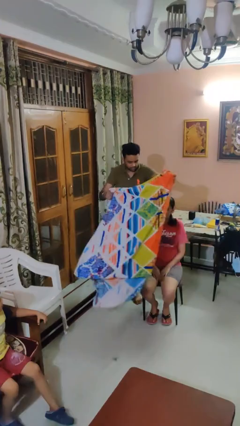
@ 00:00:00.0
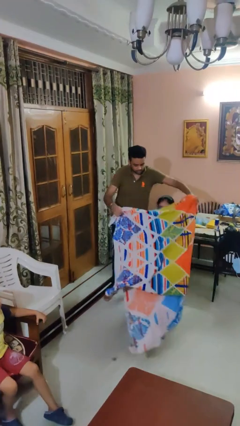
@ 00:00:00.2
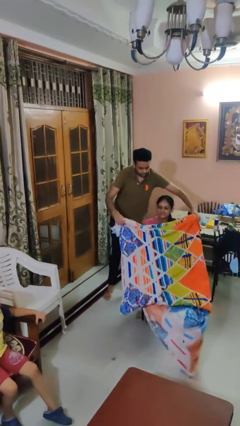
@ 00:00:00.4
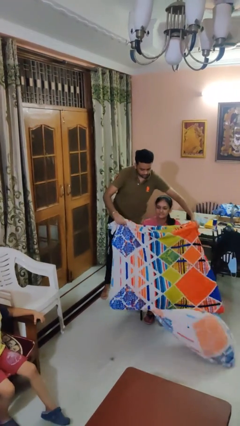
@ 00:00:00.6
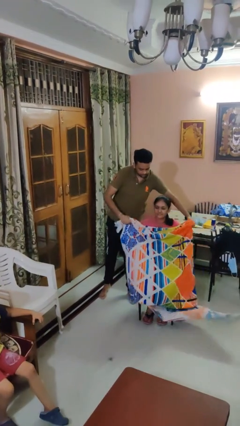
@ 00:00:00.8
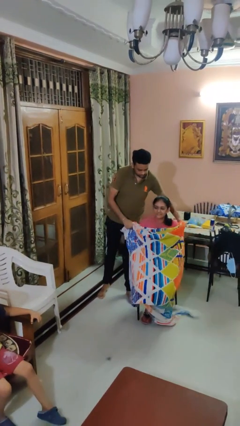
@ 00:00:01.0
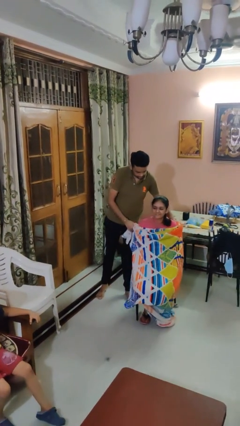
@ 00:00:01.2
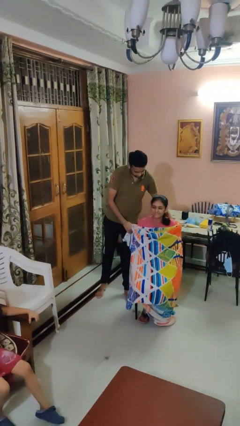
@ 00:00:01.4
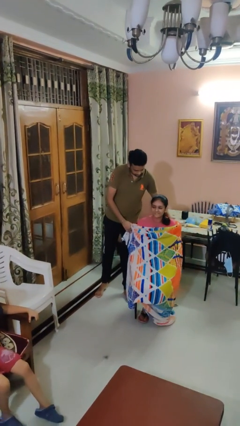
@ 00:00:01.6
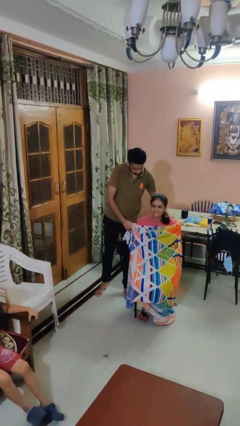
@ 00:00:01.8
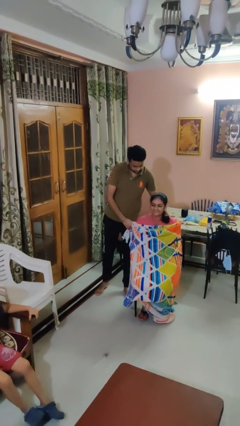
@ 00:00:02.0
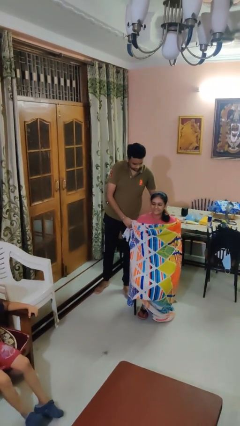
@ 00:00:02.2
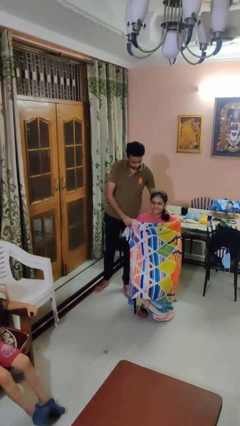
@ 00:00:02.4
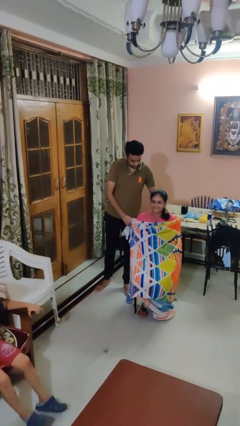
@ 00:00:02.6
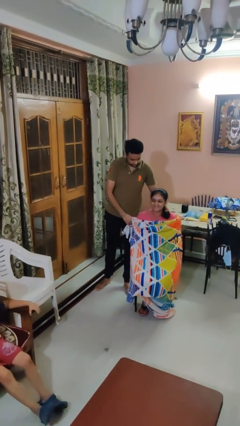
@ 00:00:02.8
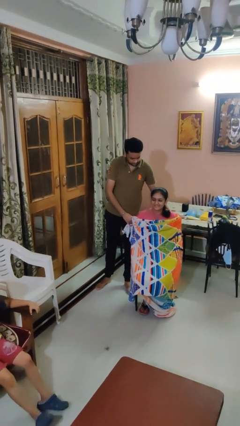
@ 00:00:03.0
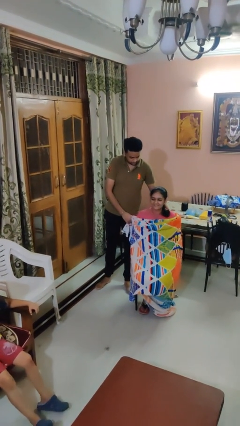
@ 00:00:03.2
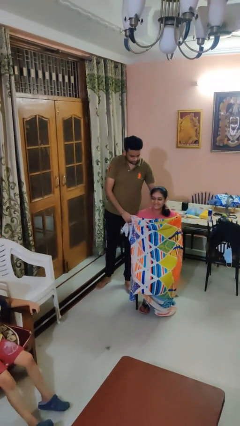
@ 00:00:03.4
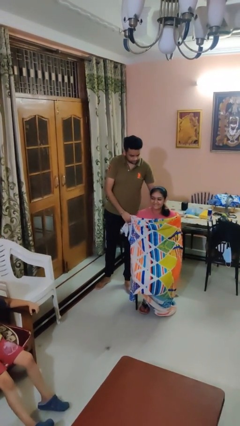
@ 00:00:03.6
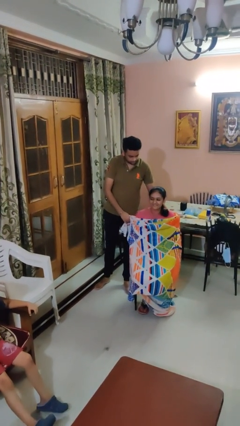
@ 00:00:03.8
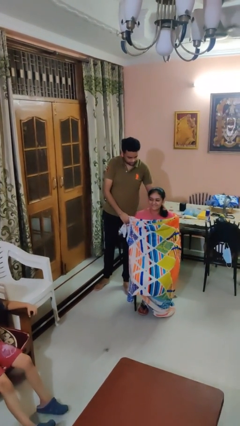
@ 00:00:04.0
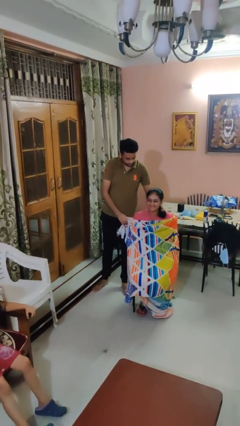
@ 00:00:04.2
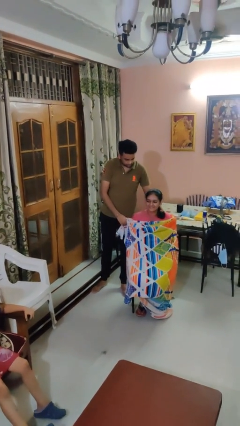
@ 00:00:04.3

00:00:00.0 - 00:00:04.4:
person covers friend with blanket

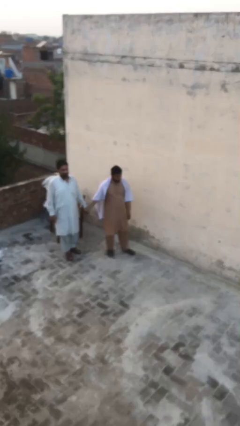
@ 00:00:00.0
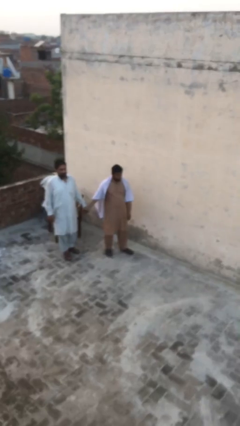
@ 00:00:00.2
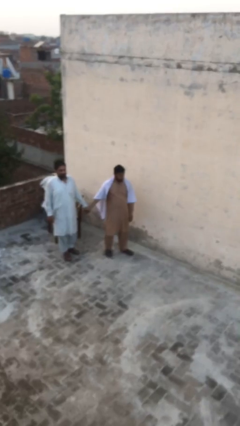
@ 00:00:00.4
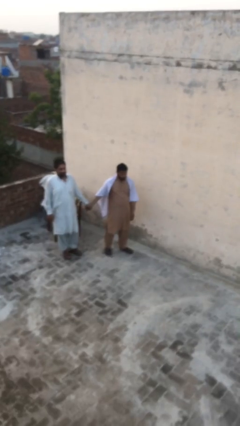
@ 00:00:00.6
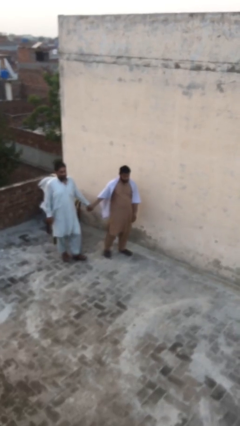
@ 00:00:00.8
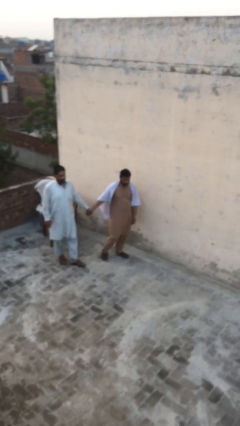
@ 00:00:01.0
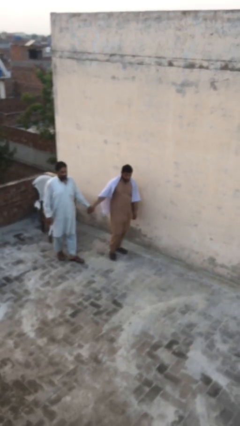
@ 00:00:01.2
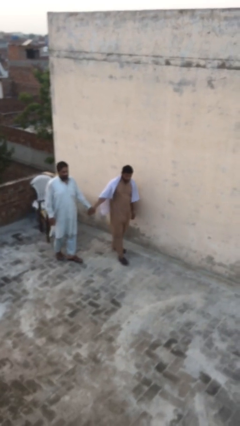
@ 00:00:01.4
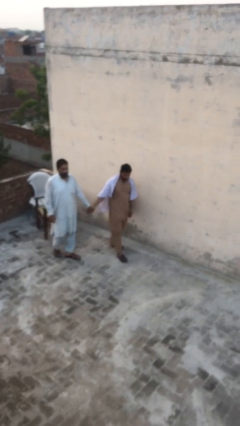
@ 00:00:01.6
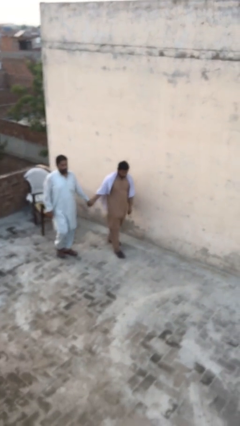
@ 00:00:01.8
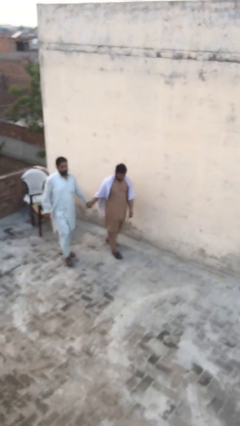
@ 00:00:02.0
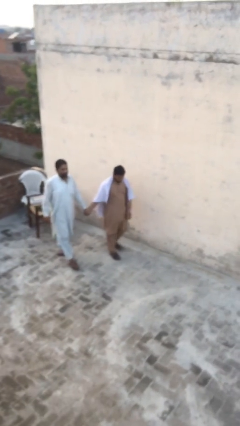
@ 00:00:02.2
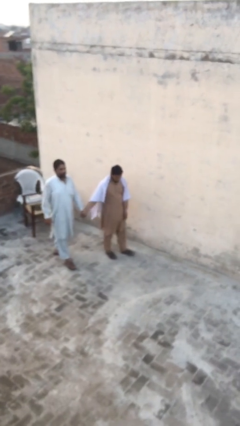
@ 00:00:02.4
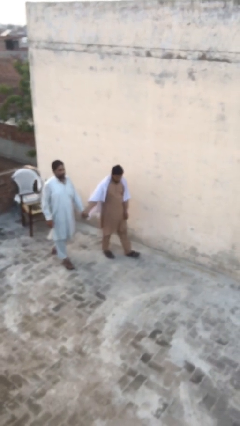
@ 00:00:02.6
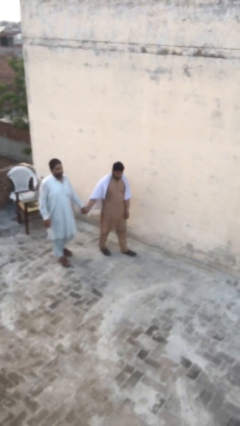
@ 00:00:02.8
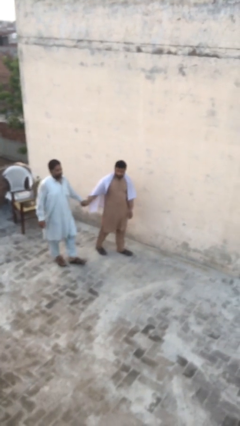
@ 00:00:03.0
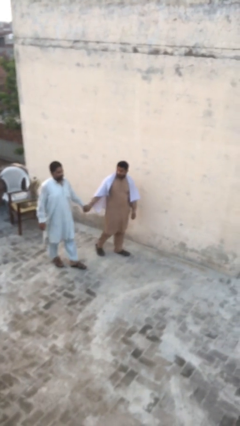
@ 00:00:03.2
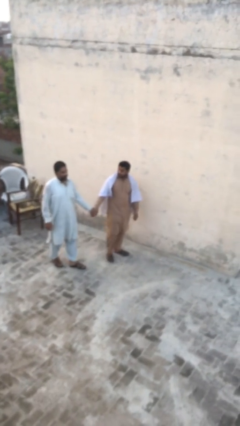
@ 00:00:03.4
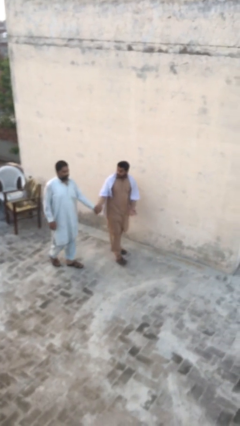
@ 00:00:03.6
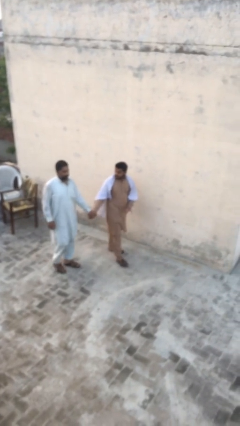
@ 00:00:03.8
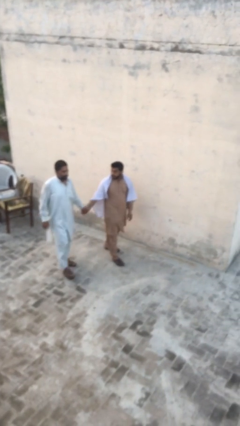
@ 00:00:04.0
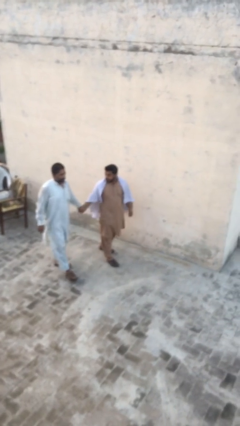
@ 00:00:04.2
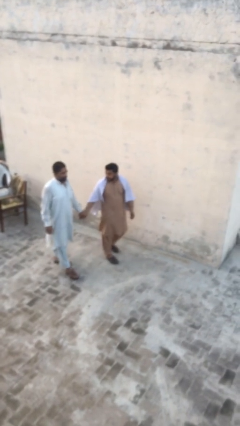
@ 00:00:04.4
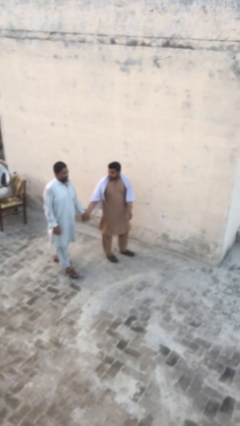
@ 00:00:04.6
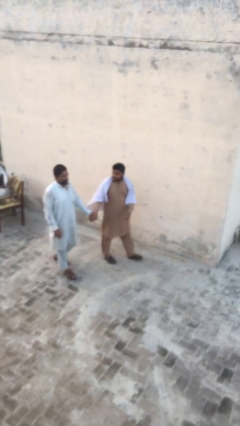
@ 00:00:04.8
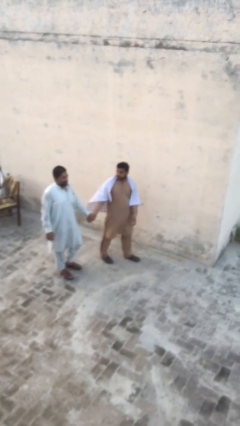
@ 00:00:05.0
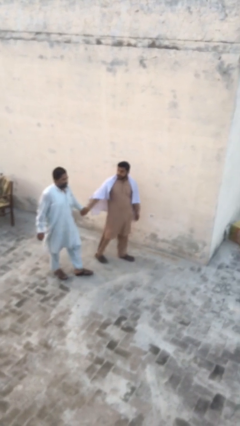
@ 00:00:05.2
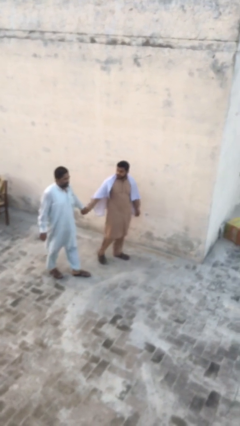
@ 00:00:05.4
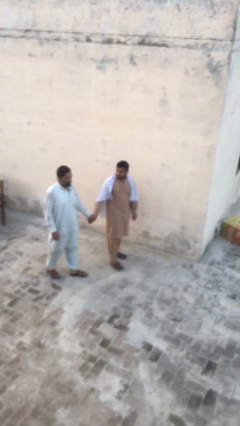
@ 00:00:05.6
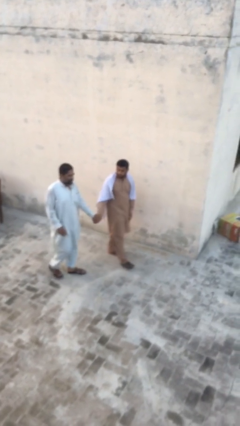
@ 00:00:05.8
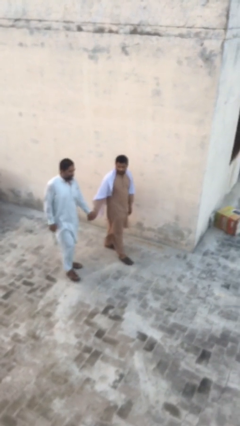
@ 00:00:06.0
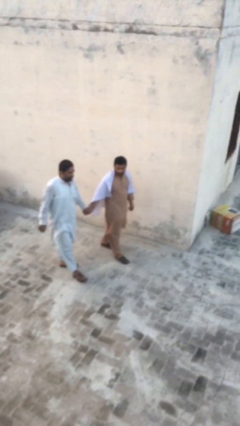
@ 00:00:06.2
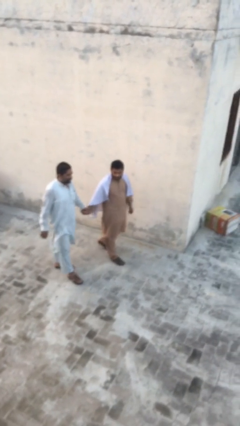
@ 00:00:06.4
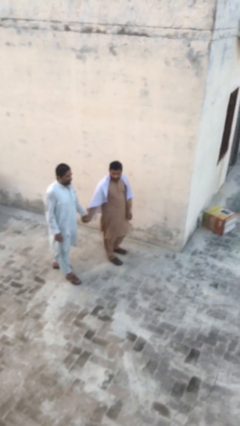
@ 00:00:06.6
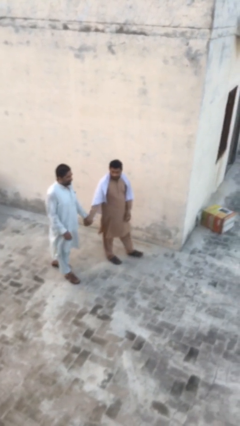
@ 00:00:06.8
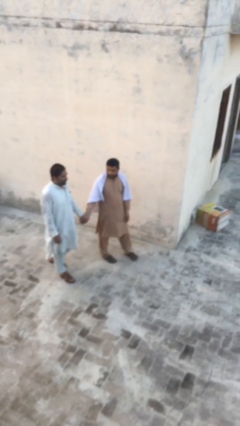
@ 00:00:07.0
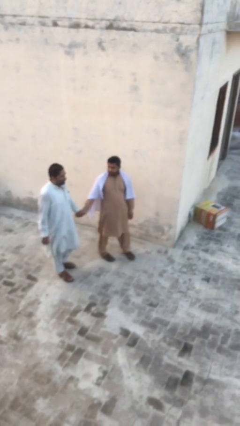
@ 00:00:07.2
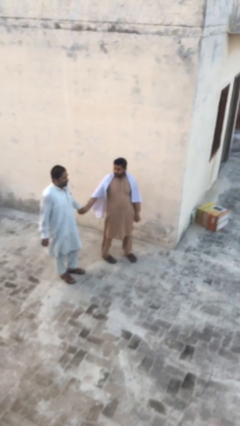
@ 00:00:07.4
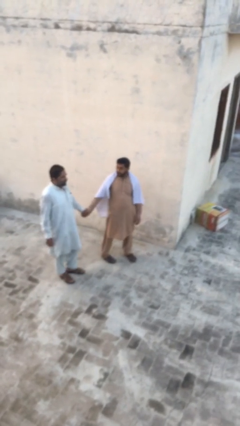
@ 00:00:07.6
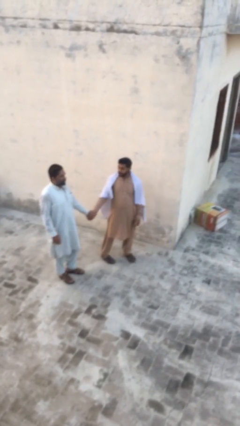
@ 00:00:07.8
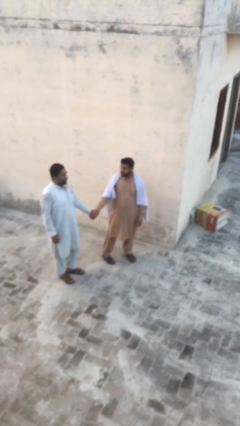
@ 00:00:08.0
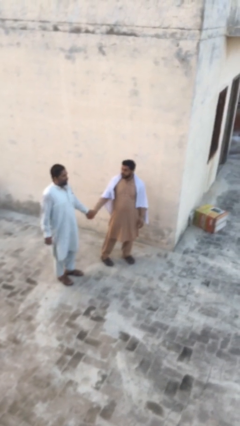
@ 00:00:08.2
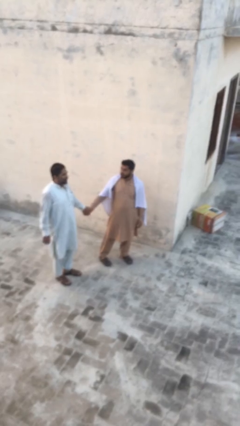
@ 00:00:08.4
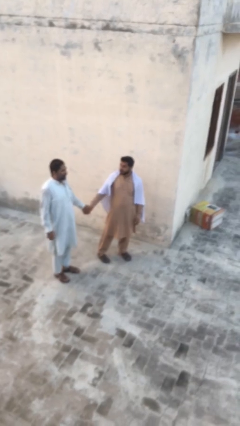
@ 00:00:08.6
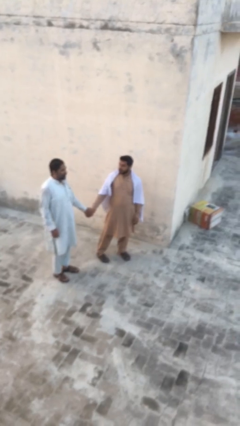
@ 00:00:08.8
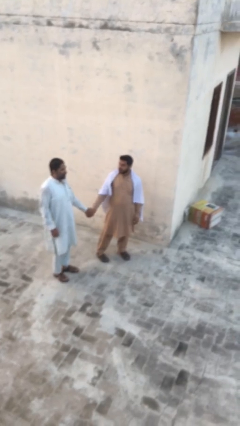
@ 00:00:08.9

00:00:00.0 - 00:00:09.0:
person holds hand

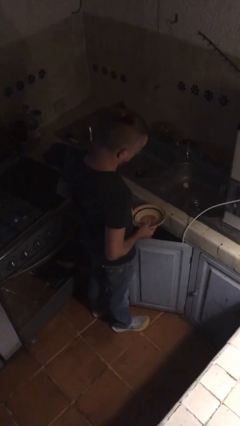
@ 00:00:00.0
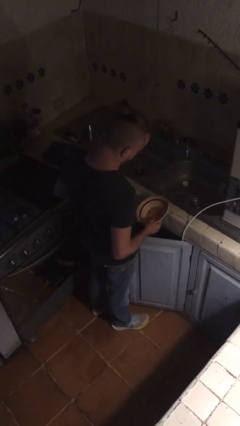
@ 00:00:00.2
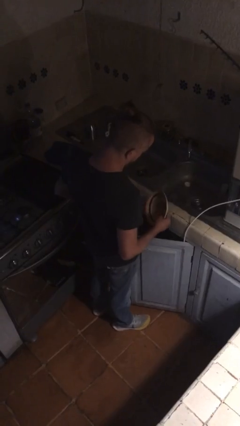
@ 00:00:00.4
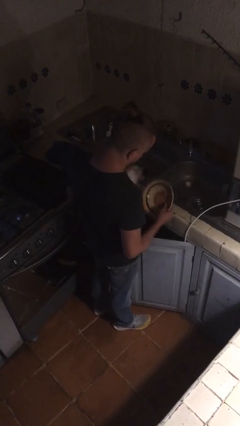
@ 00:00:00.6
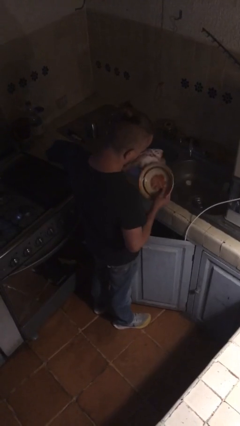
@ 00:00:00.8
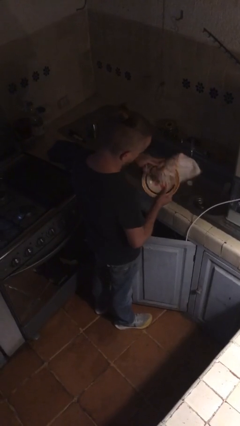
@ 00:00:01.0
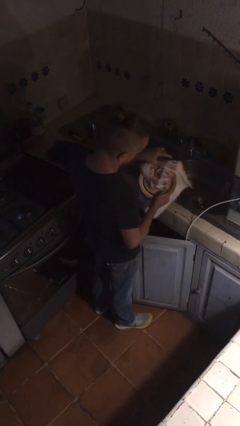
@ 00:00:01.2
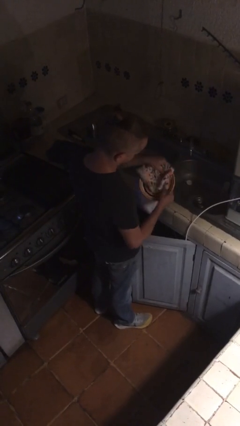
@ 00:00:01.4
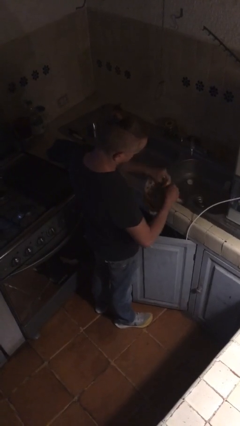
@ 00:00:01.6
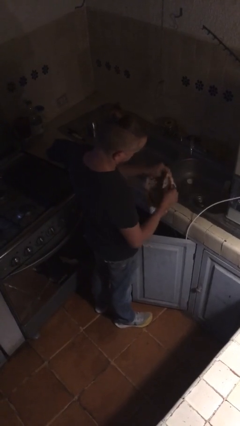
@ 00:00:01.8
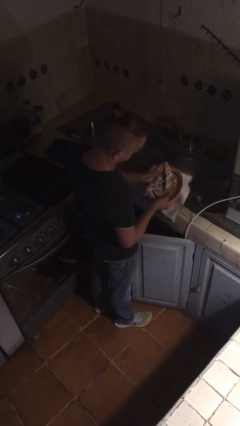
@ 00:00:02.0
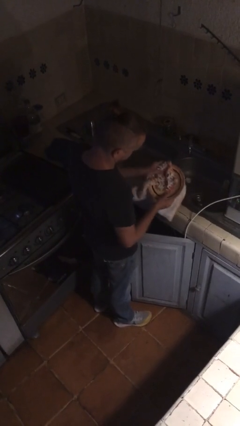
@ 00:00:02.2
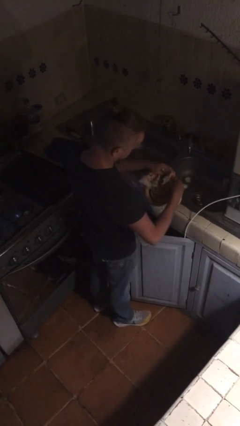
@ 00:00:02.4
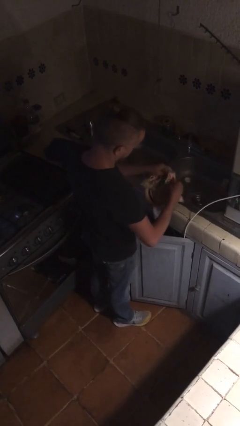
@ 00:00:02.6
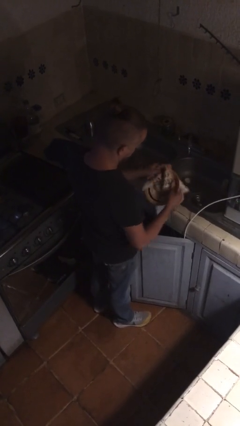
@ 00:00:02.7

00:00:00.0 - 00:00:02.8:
person dries dish

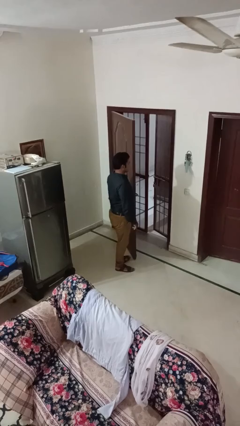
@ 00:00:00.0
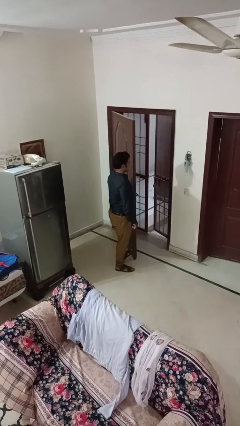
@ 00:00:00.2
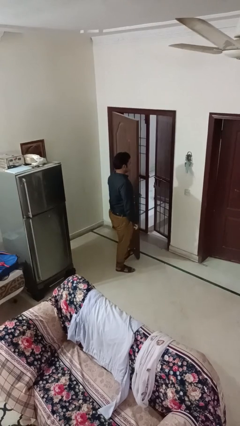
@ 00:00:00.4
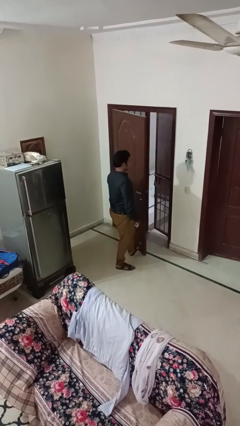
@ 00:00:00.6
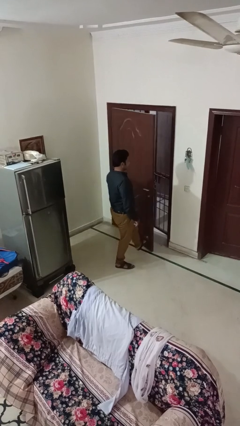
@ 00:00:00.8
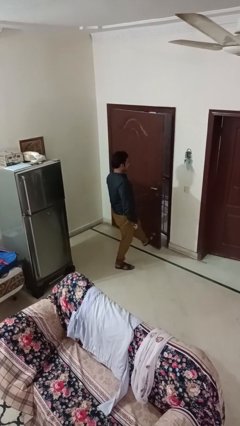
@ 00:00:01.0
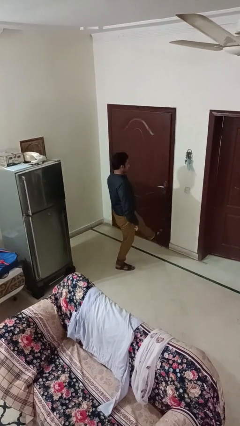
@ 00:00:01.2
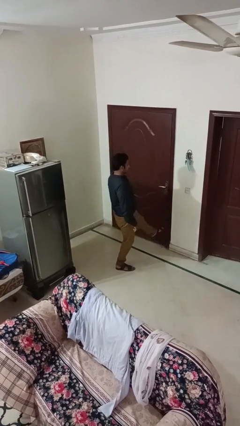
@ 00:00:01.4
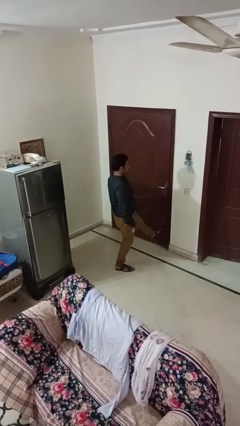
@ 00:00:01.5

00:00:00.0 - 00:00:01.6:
person closes door with foot
